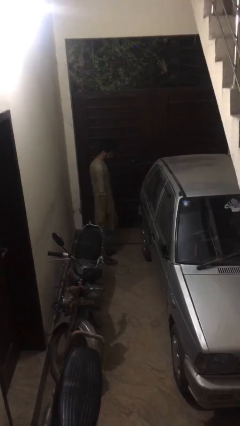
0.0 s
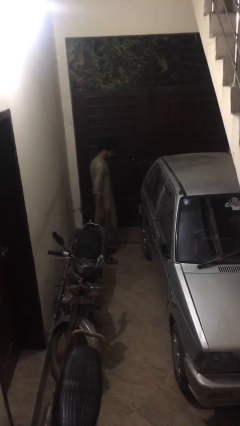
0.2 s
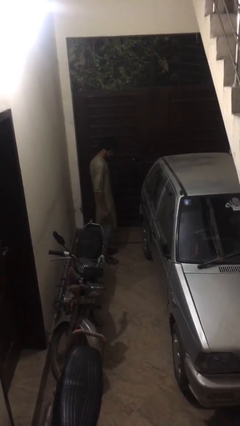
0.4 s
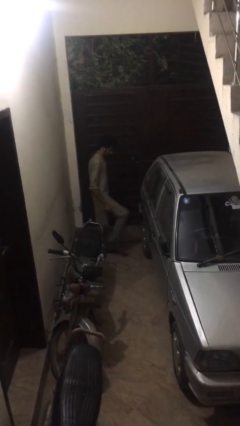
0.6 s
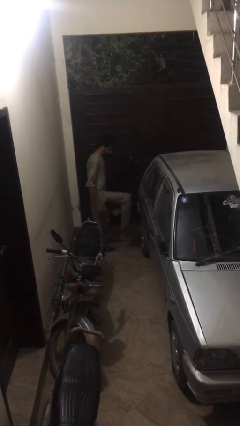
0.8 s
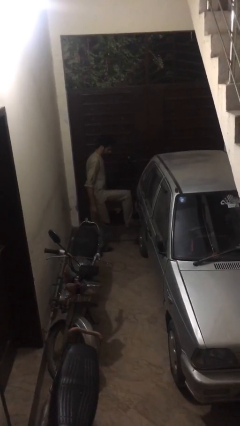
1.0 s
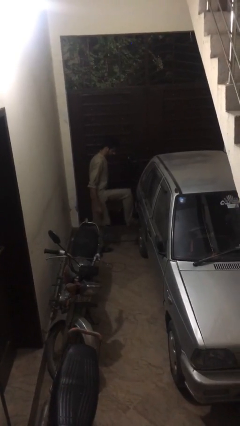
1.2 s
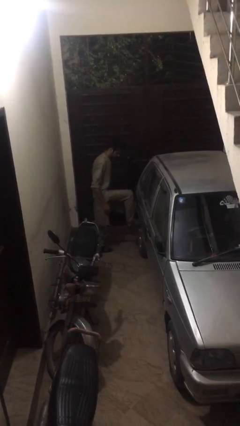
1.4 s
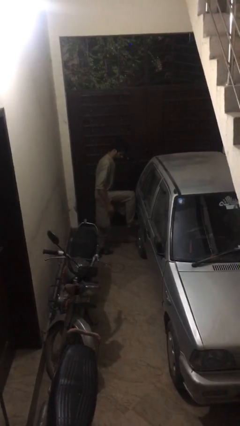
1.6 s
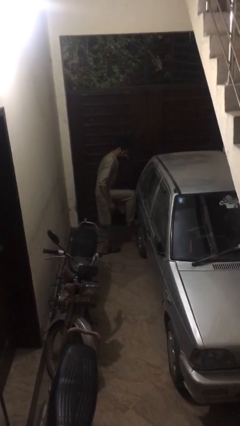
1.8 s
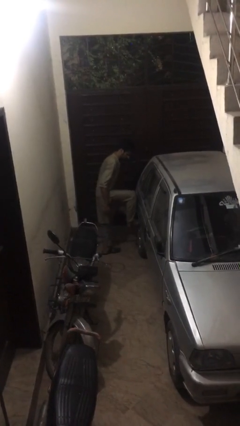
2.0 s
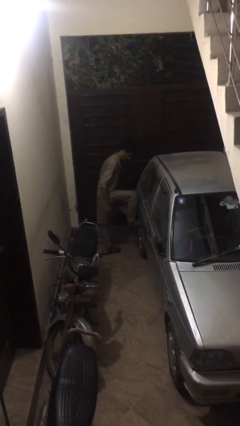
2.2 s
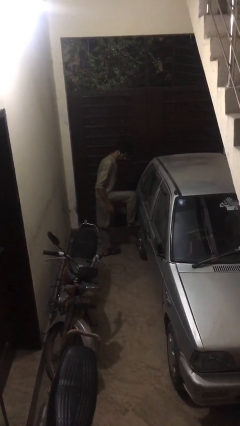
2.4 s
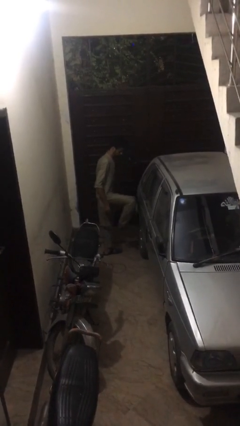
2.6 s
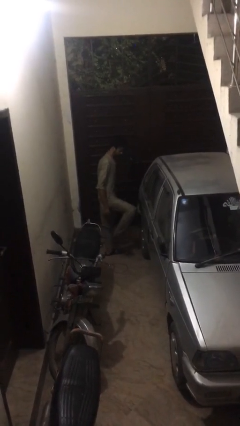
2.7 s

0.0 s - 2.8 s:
person kicks car tires

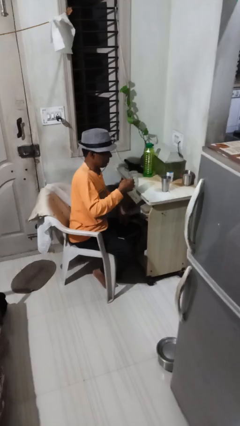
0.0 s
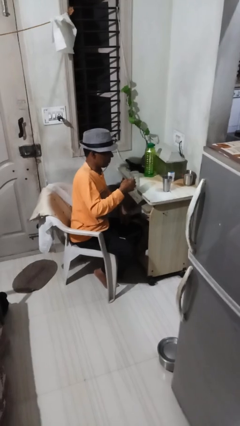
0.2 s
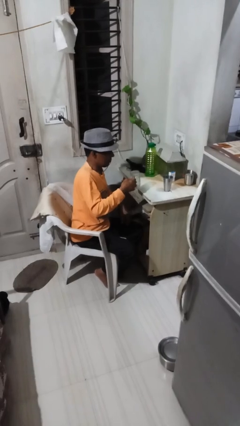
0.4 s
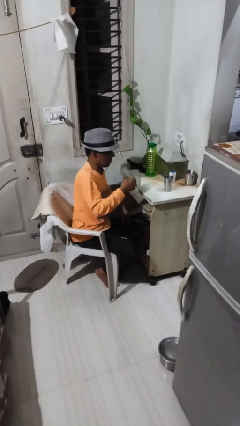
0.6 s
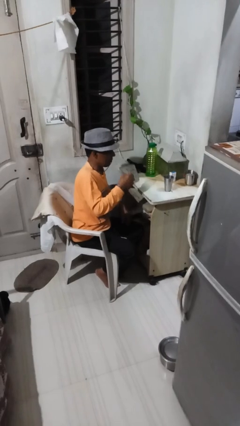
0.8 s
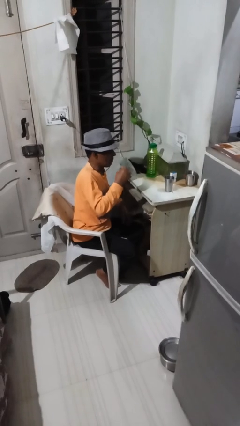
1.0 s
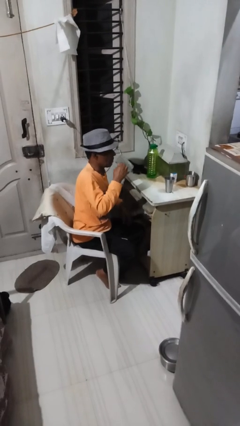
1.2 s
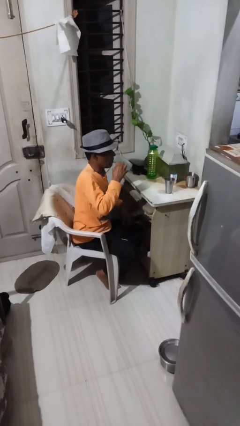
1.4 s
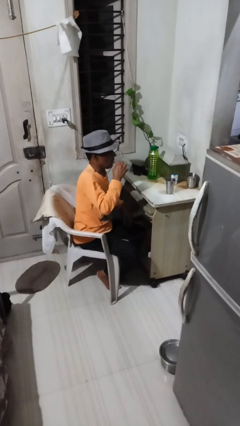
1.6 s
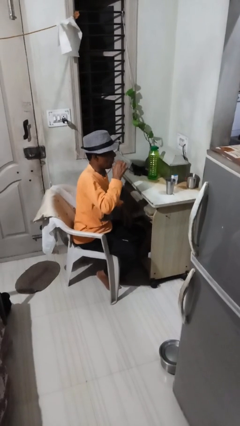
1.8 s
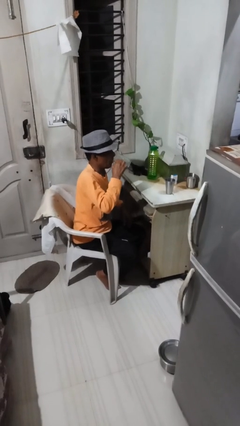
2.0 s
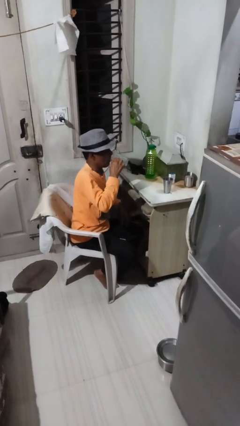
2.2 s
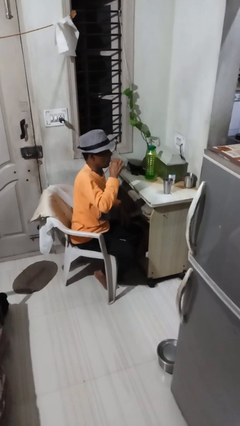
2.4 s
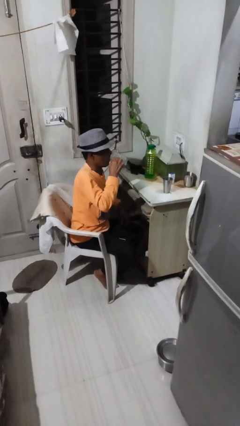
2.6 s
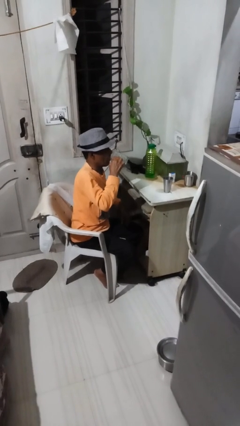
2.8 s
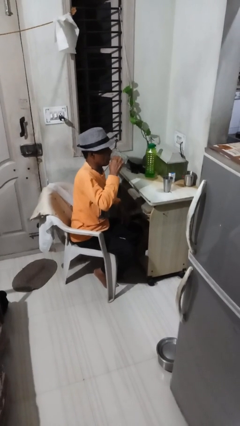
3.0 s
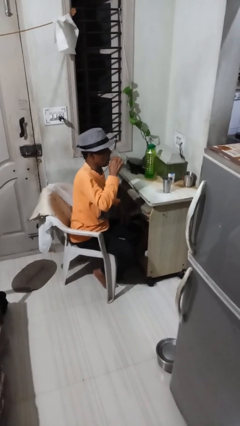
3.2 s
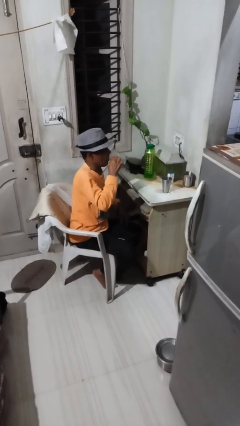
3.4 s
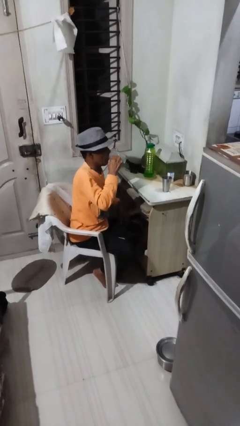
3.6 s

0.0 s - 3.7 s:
person drinks from mug

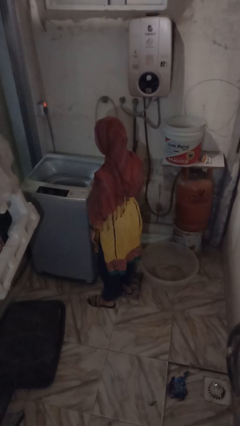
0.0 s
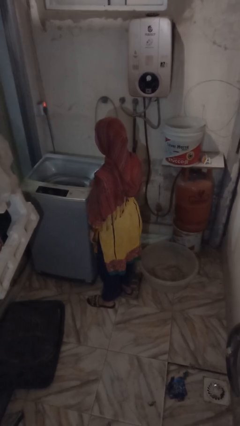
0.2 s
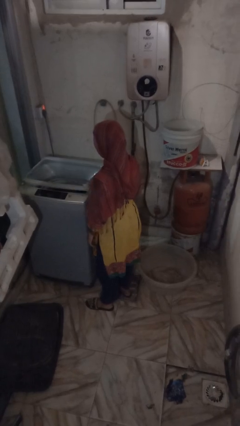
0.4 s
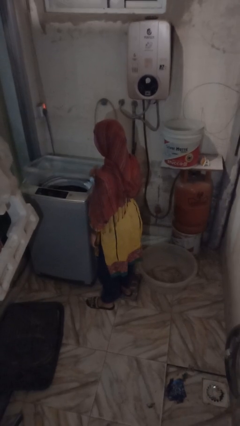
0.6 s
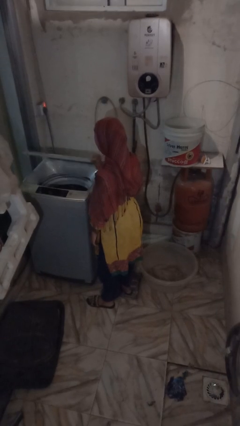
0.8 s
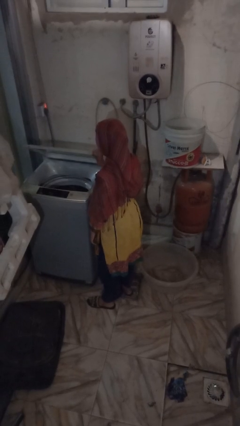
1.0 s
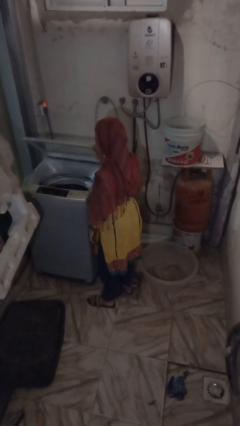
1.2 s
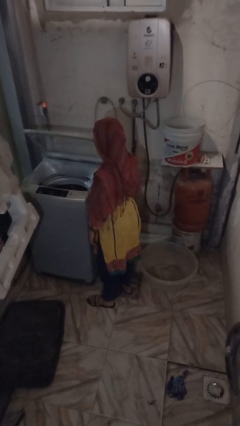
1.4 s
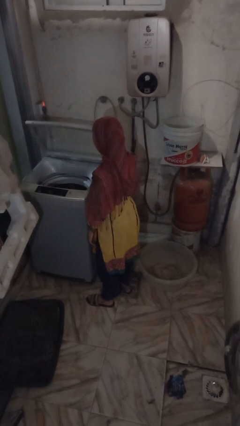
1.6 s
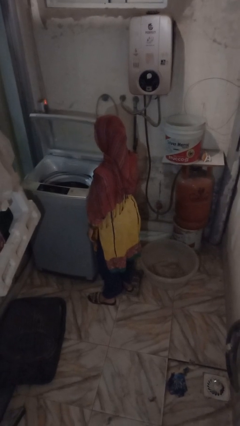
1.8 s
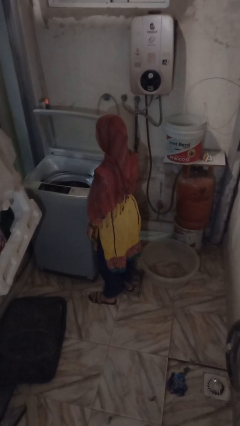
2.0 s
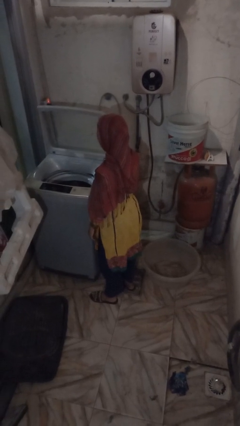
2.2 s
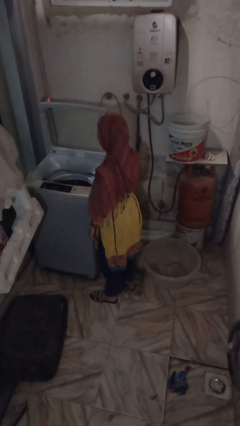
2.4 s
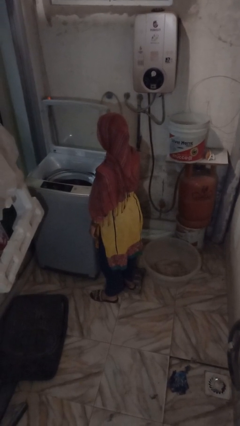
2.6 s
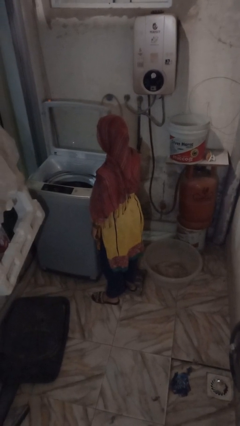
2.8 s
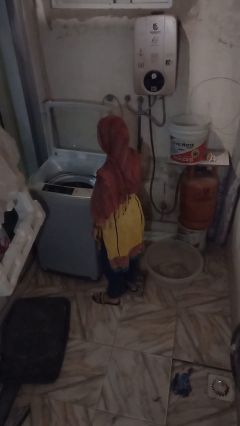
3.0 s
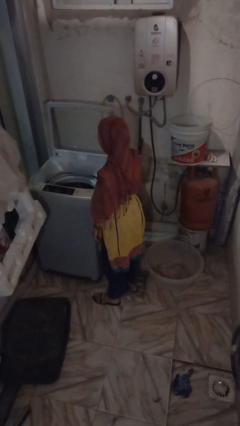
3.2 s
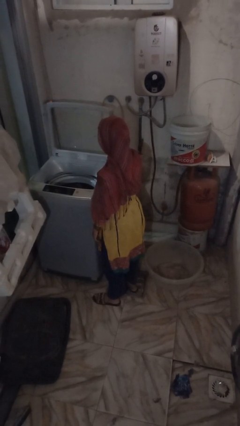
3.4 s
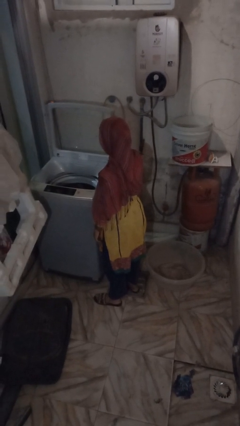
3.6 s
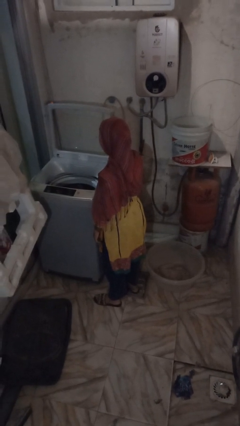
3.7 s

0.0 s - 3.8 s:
person opens clothes washer

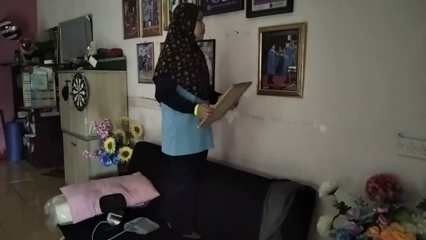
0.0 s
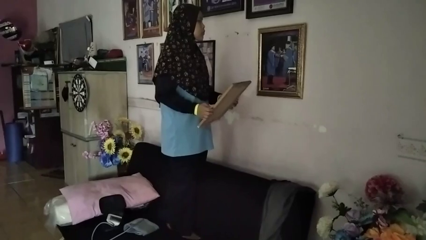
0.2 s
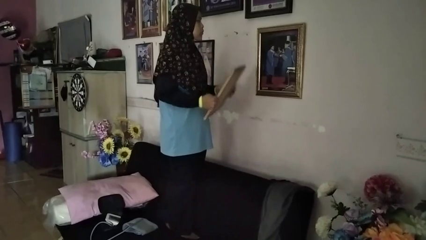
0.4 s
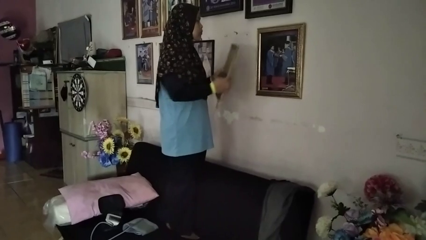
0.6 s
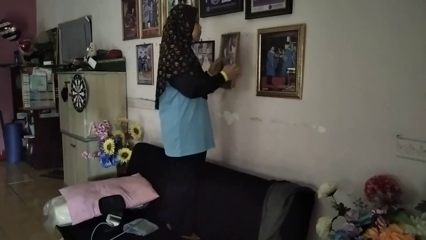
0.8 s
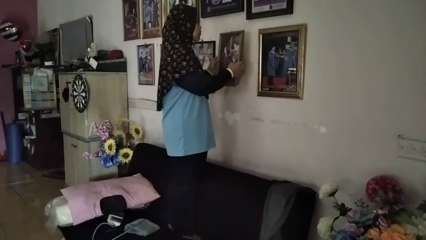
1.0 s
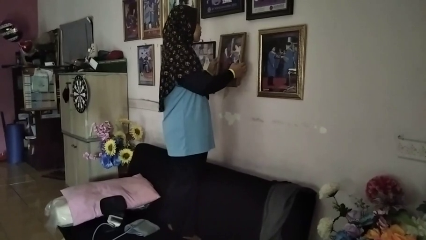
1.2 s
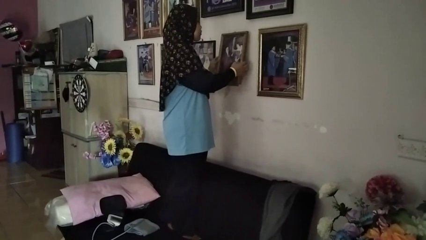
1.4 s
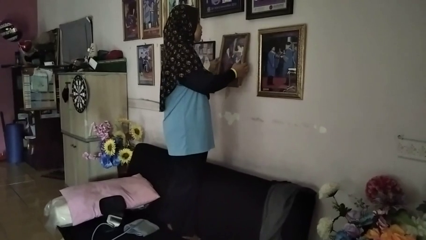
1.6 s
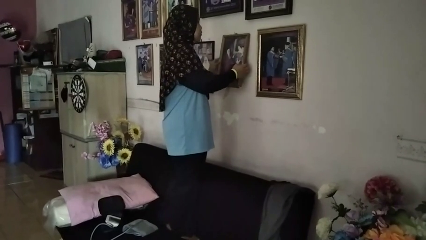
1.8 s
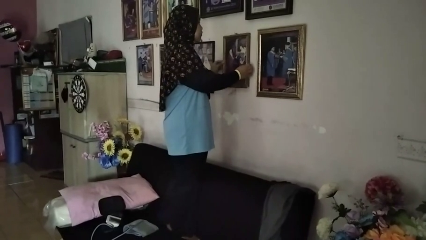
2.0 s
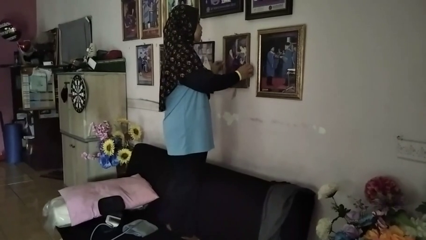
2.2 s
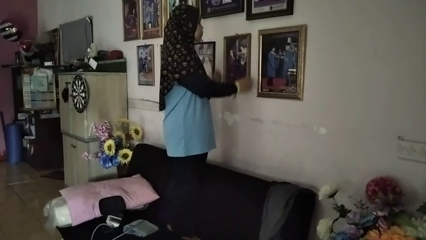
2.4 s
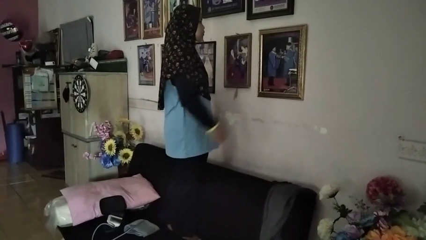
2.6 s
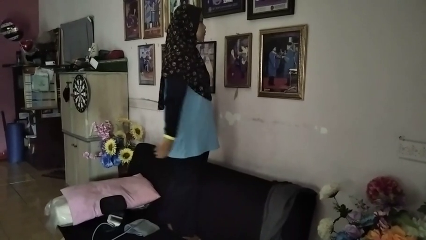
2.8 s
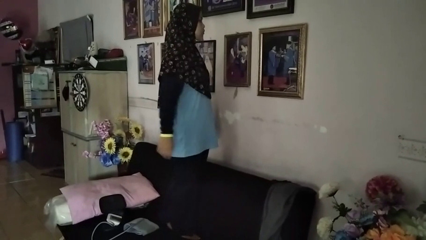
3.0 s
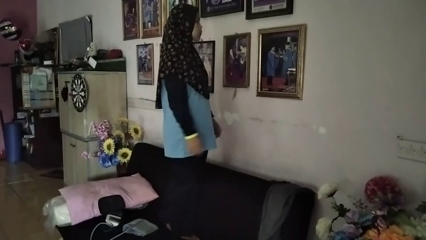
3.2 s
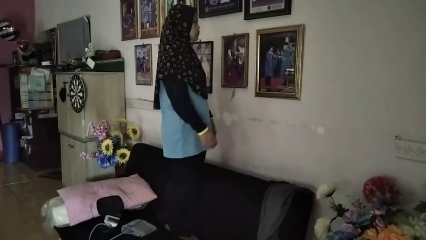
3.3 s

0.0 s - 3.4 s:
person puts up picture frame

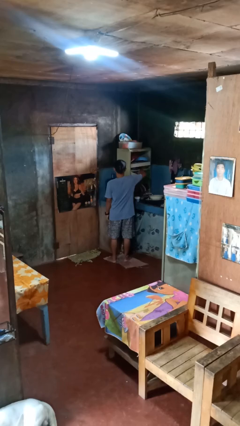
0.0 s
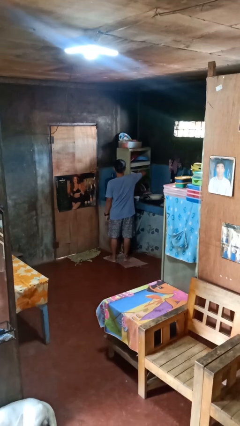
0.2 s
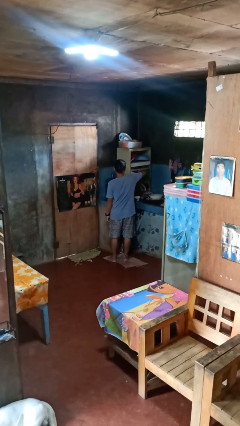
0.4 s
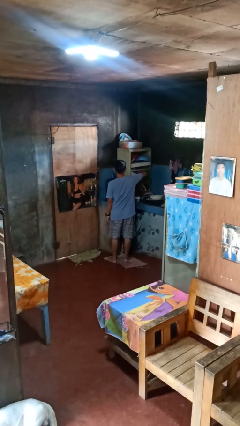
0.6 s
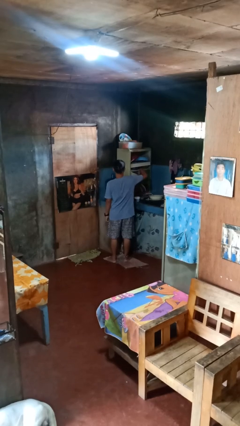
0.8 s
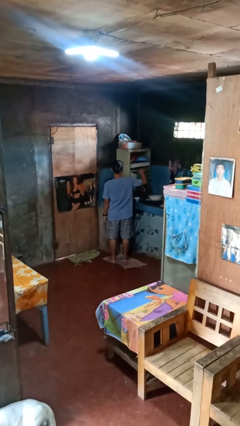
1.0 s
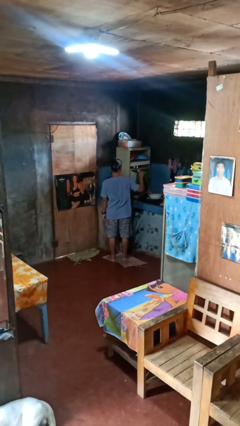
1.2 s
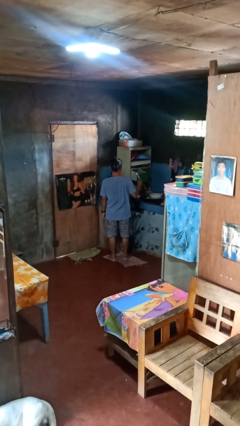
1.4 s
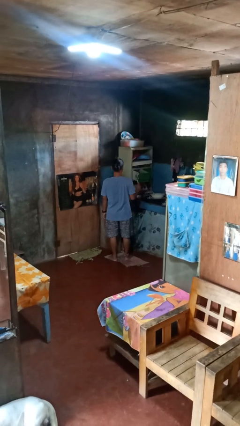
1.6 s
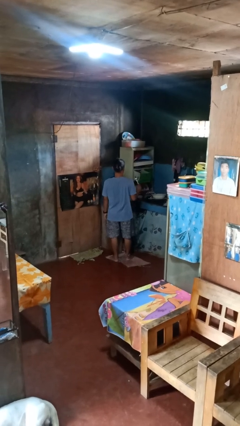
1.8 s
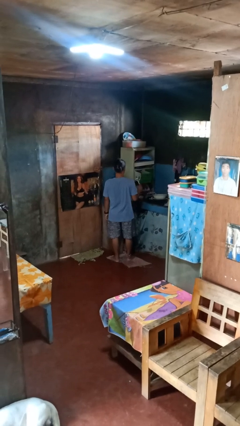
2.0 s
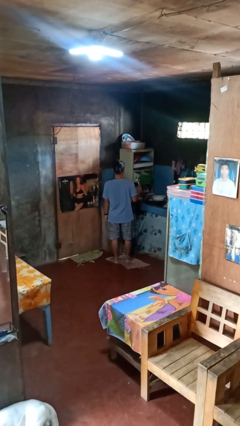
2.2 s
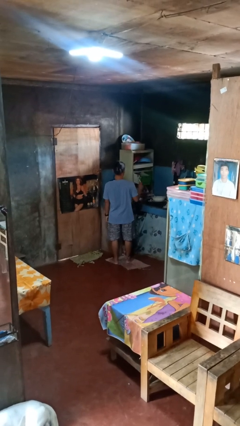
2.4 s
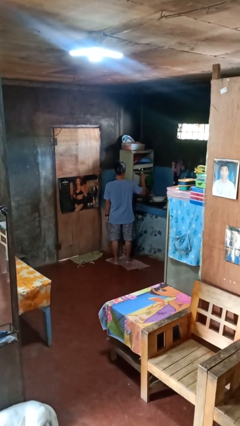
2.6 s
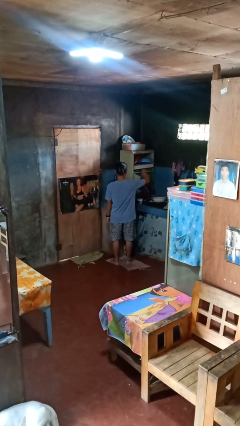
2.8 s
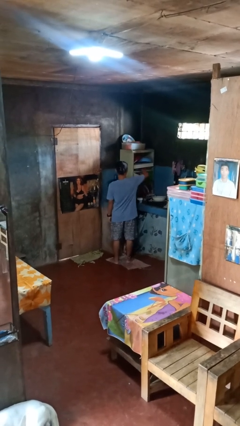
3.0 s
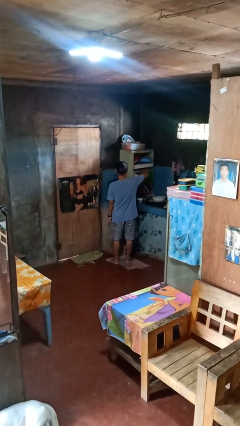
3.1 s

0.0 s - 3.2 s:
person takes object from kitchen drawer

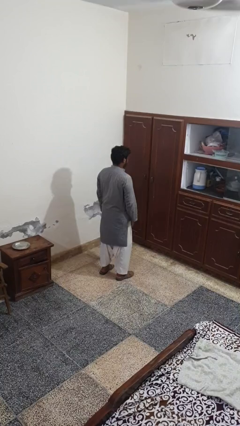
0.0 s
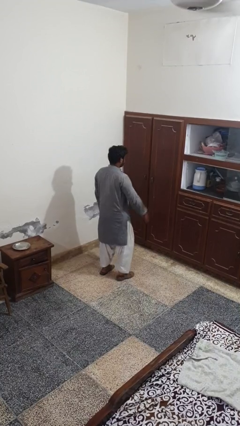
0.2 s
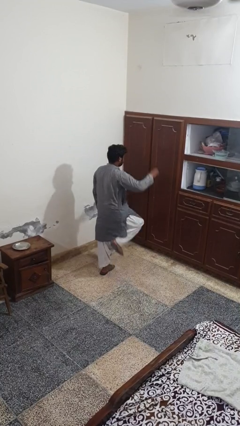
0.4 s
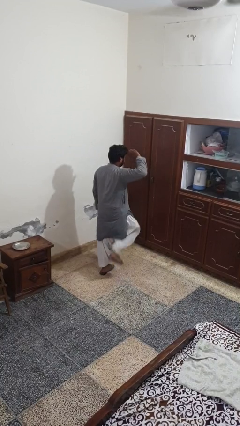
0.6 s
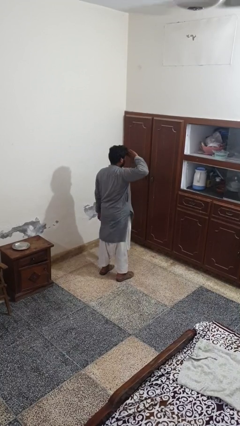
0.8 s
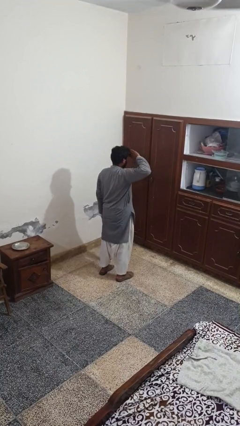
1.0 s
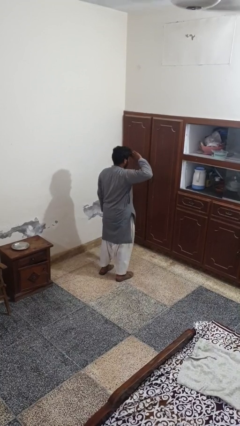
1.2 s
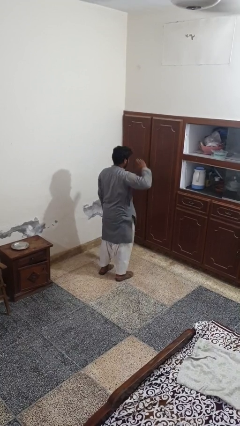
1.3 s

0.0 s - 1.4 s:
person salutes
